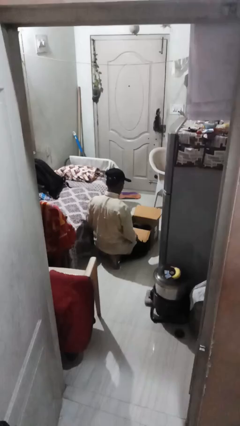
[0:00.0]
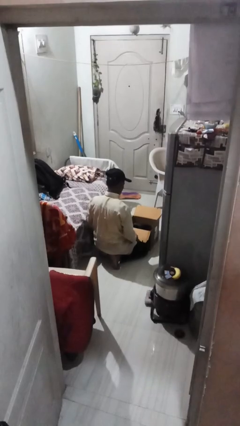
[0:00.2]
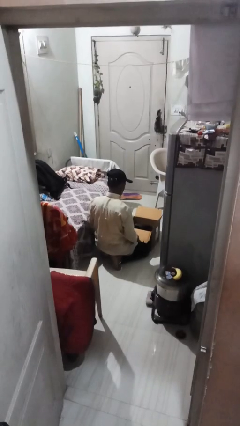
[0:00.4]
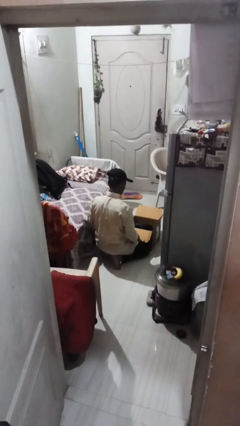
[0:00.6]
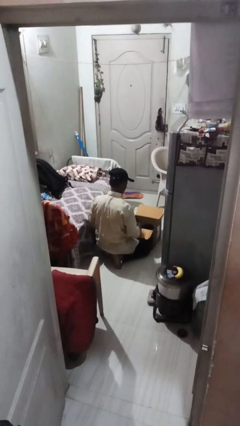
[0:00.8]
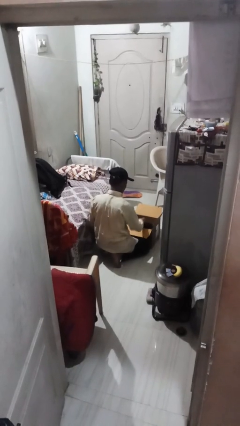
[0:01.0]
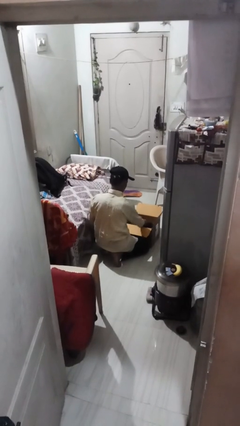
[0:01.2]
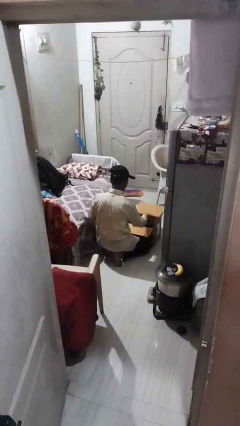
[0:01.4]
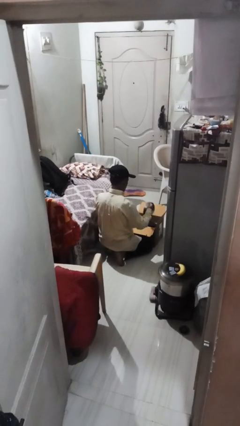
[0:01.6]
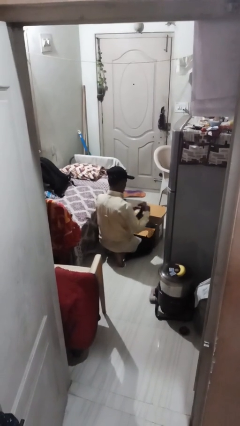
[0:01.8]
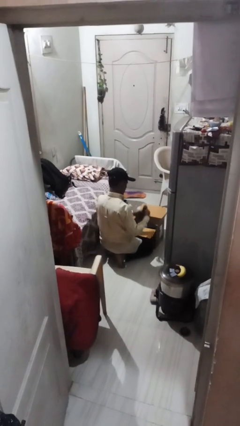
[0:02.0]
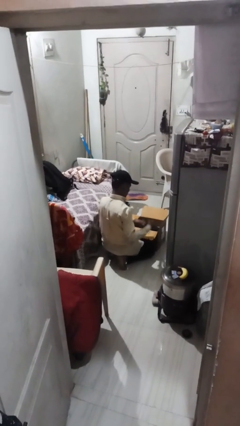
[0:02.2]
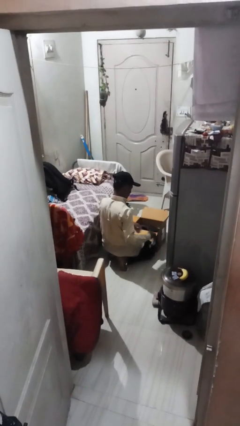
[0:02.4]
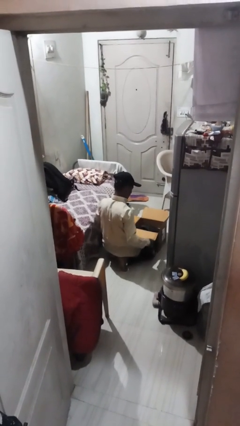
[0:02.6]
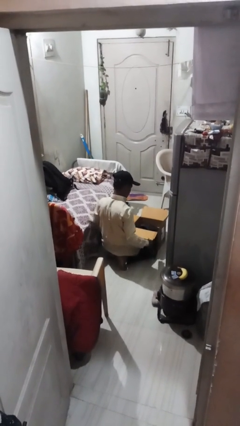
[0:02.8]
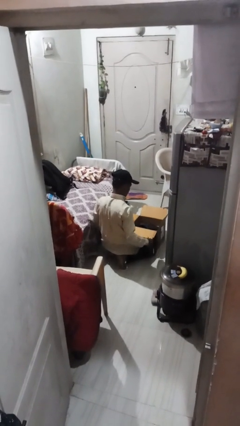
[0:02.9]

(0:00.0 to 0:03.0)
person takes object from box

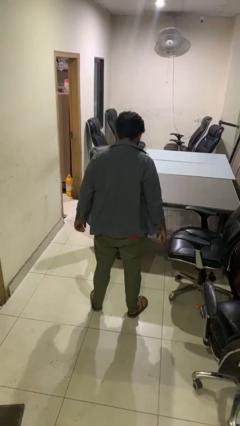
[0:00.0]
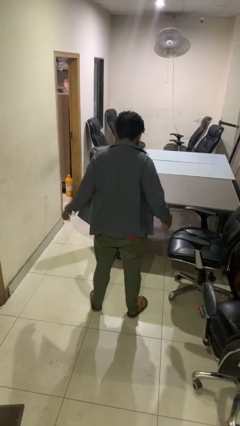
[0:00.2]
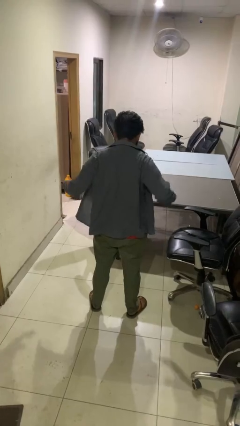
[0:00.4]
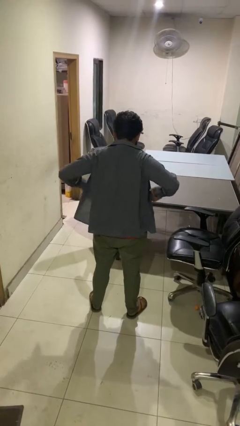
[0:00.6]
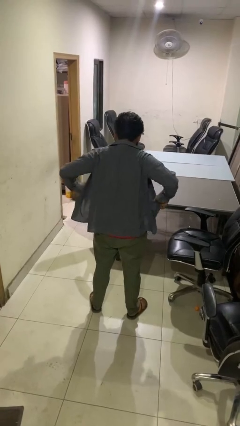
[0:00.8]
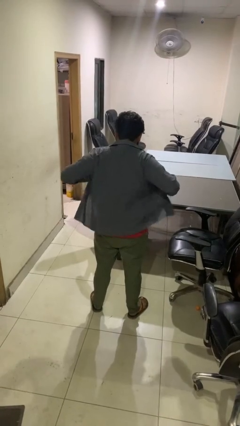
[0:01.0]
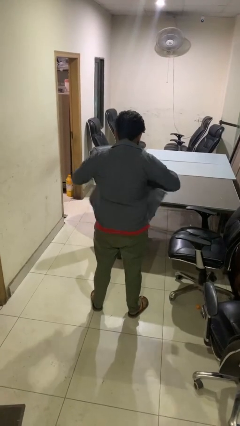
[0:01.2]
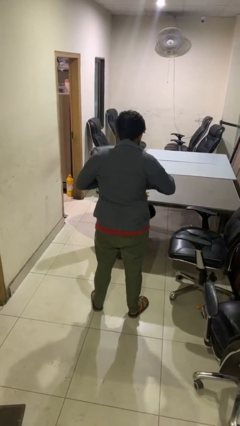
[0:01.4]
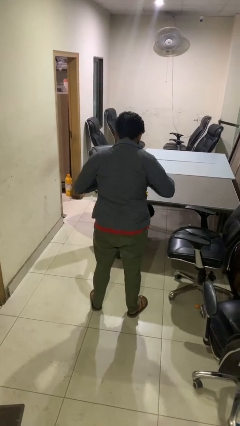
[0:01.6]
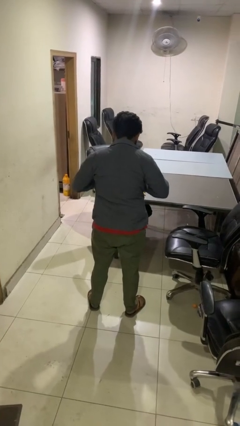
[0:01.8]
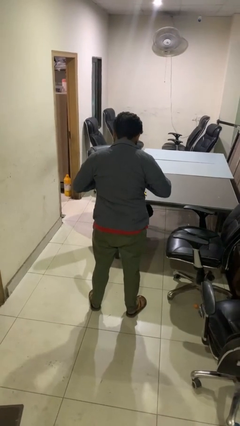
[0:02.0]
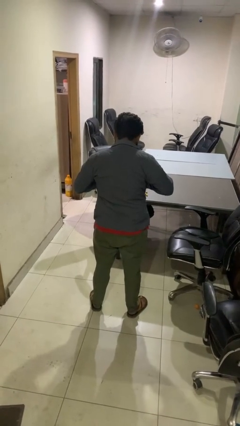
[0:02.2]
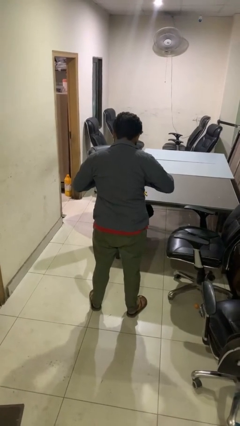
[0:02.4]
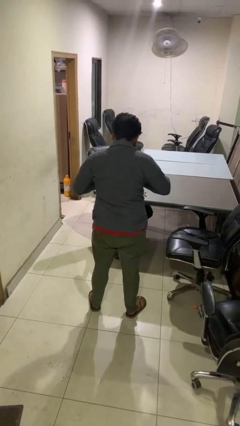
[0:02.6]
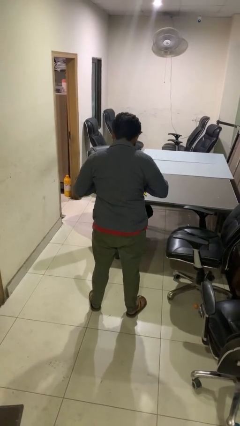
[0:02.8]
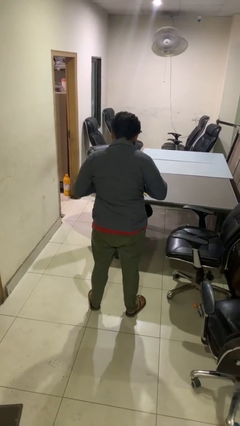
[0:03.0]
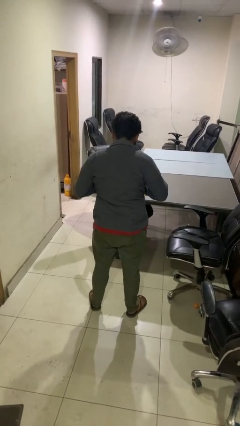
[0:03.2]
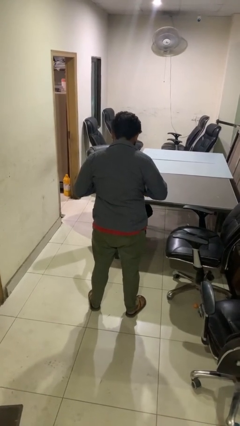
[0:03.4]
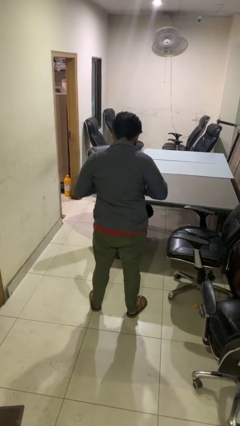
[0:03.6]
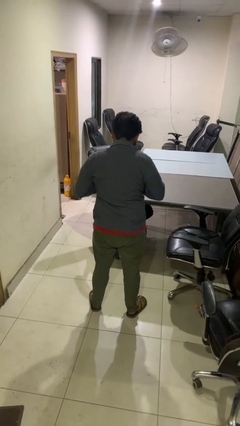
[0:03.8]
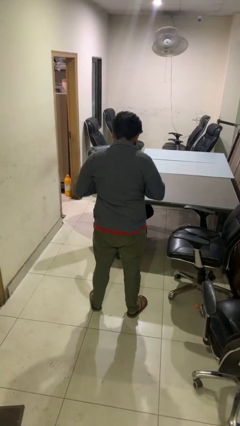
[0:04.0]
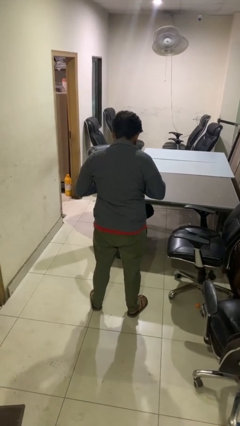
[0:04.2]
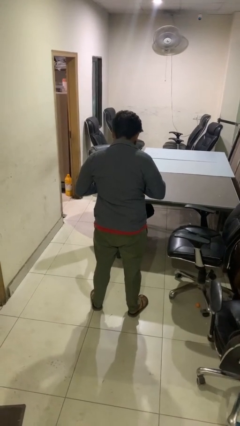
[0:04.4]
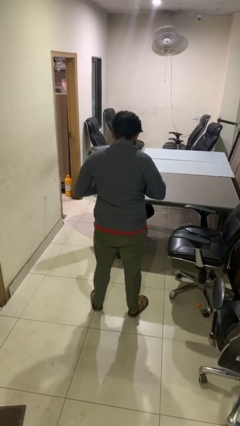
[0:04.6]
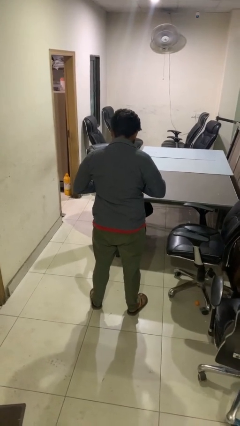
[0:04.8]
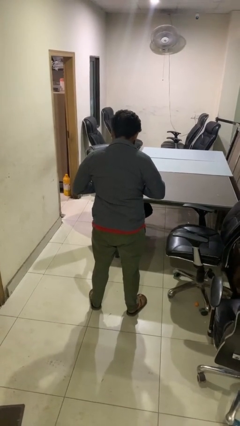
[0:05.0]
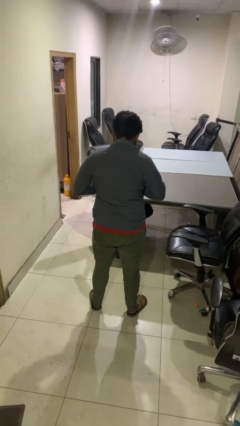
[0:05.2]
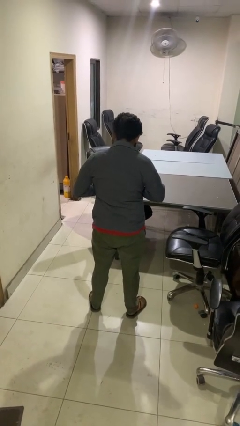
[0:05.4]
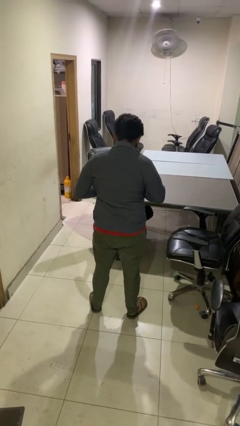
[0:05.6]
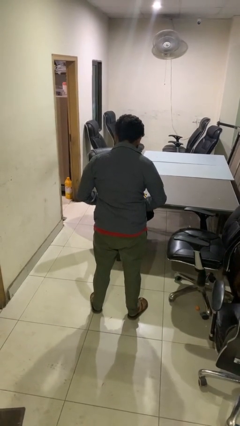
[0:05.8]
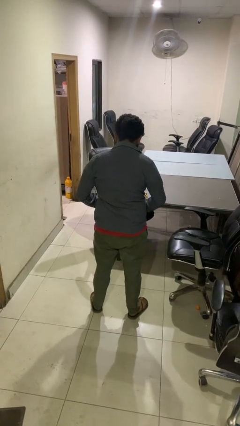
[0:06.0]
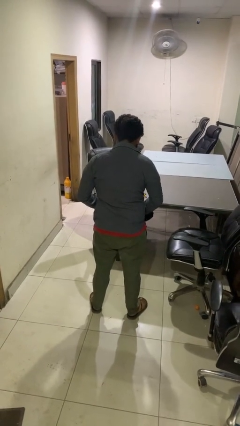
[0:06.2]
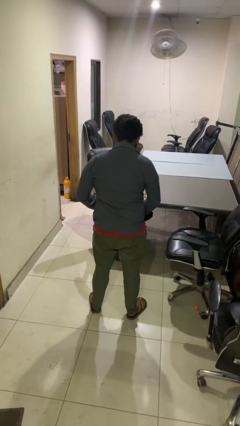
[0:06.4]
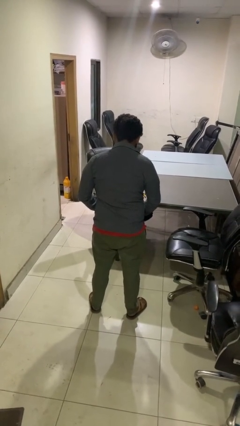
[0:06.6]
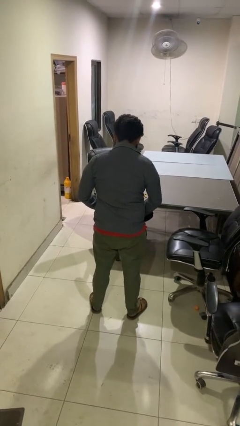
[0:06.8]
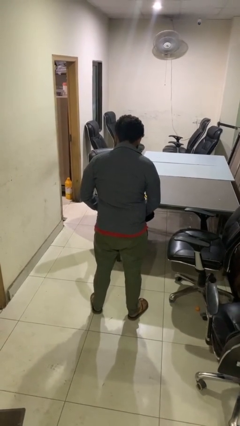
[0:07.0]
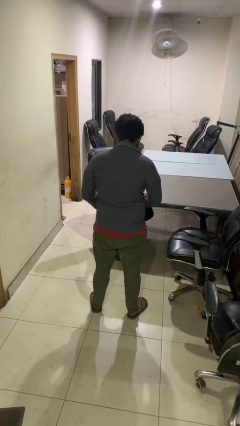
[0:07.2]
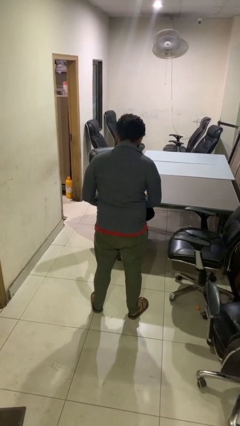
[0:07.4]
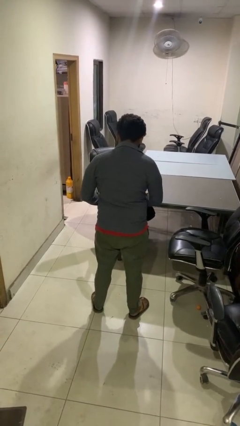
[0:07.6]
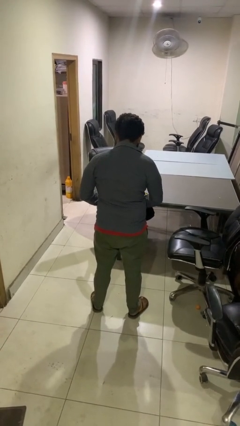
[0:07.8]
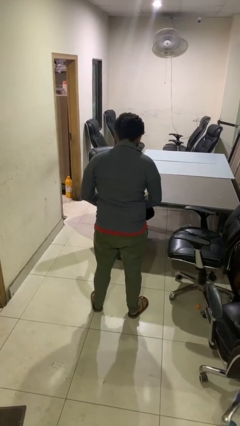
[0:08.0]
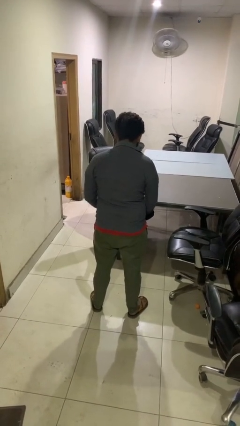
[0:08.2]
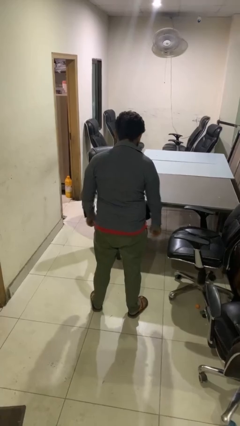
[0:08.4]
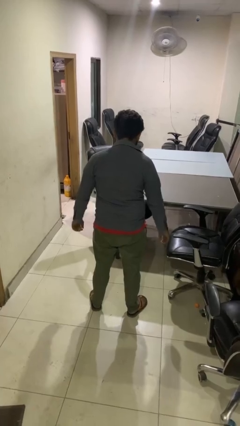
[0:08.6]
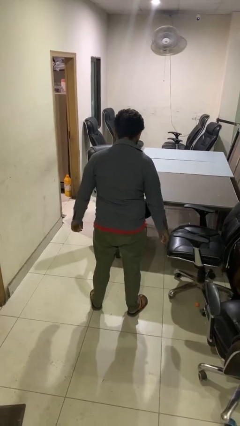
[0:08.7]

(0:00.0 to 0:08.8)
person buttons shirt

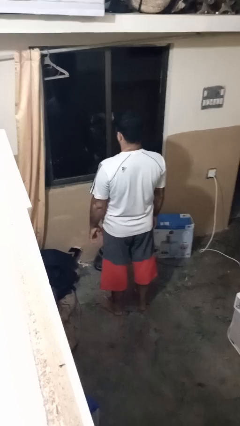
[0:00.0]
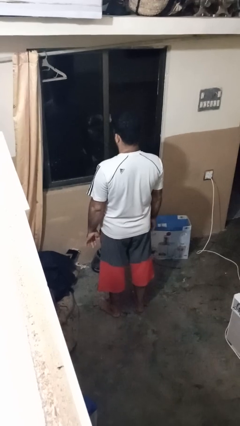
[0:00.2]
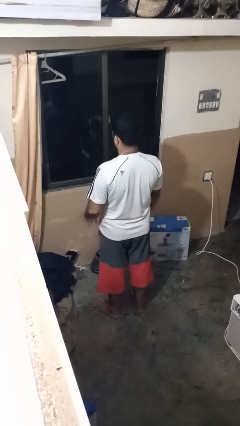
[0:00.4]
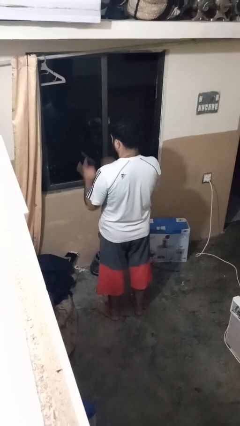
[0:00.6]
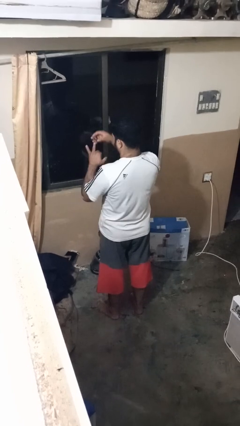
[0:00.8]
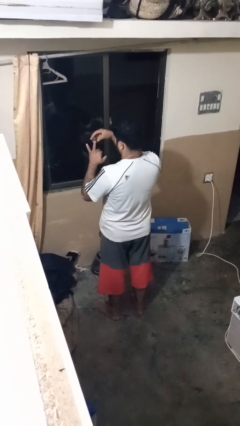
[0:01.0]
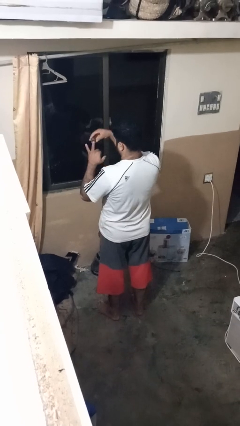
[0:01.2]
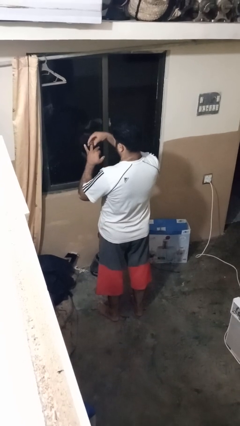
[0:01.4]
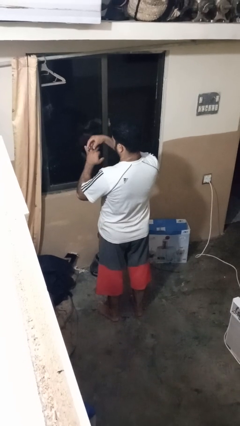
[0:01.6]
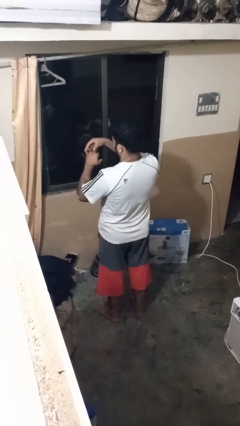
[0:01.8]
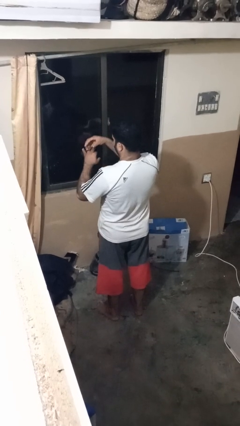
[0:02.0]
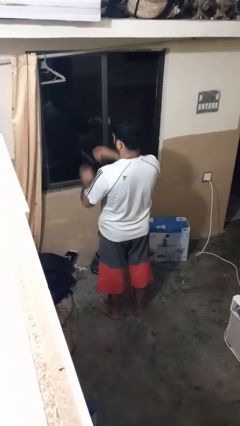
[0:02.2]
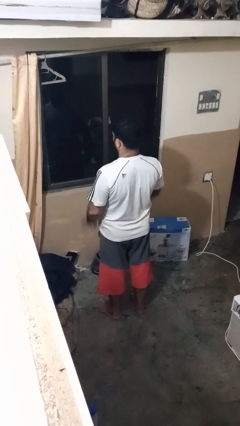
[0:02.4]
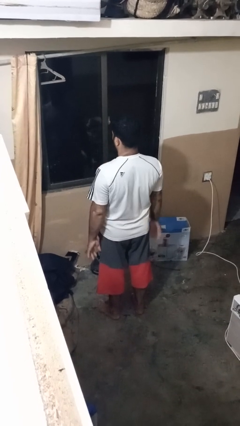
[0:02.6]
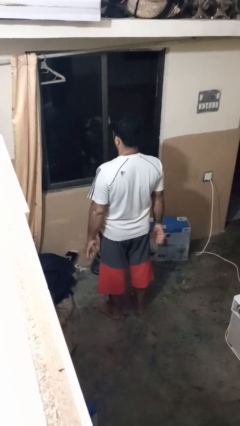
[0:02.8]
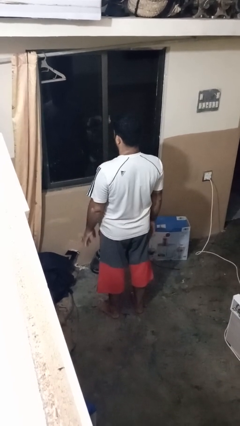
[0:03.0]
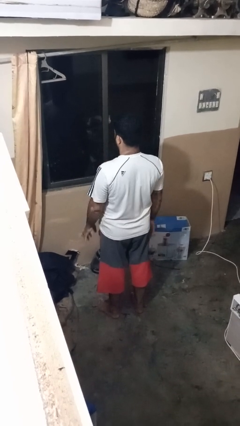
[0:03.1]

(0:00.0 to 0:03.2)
person puts on ring

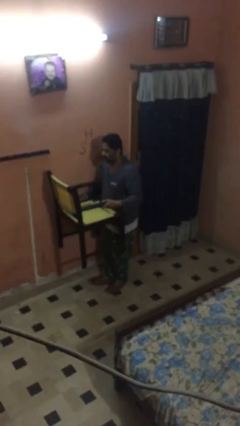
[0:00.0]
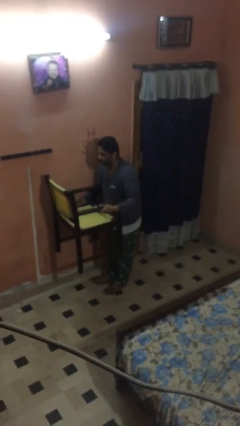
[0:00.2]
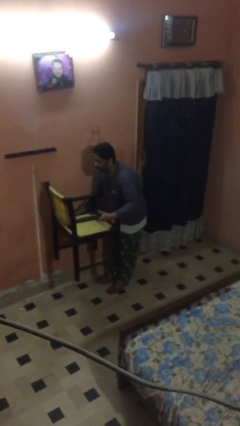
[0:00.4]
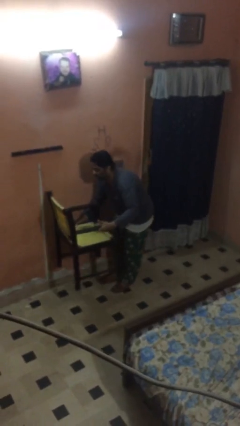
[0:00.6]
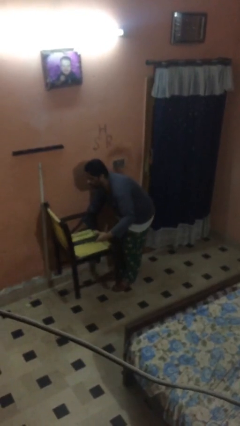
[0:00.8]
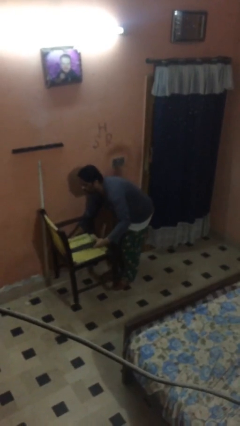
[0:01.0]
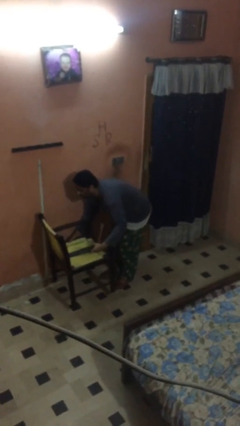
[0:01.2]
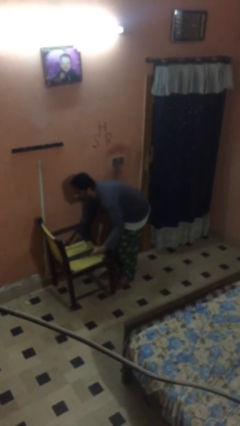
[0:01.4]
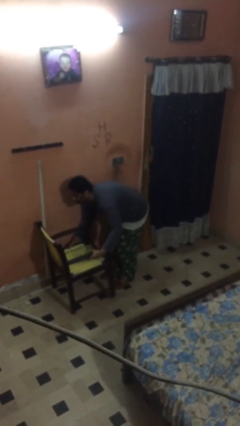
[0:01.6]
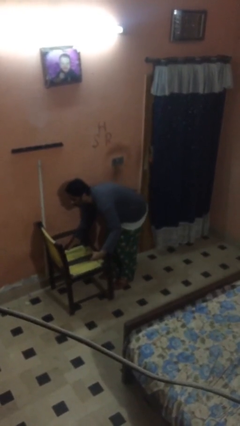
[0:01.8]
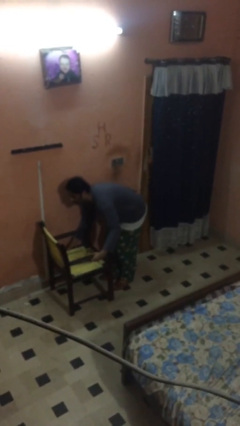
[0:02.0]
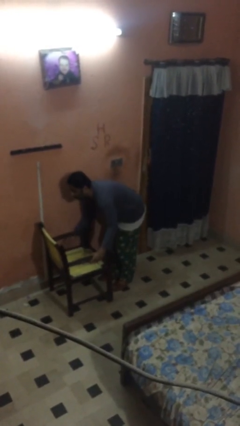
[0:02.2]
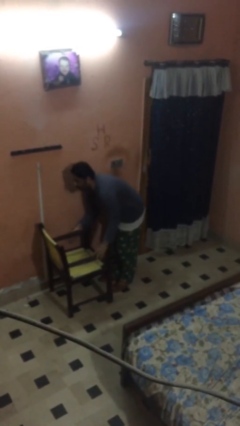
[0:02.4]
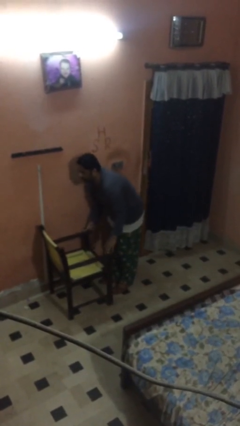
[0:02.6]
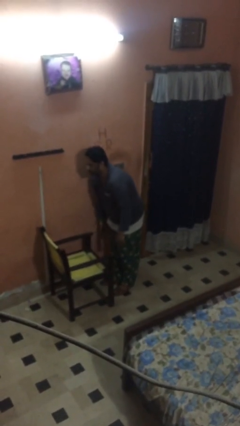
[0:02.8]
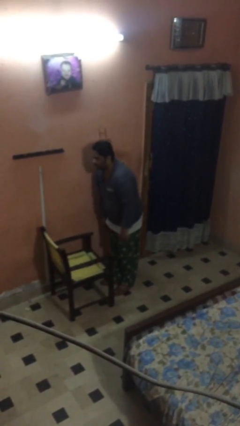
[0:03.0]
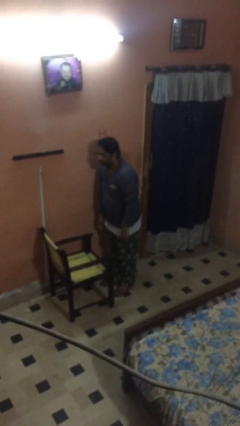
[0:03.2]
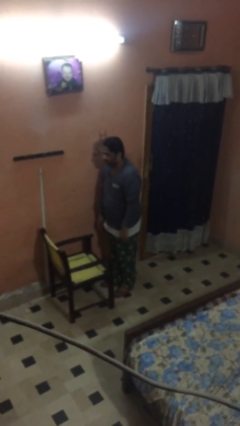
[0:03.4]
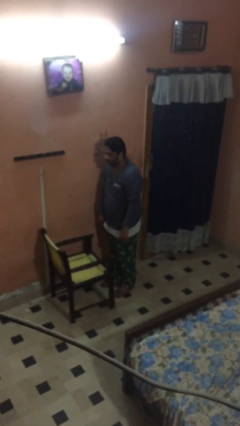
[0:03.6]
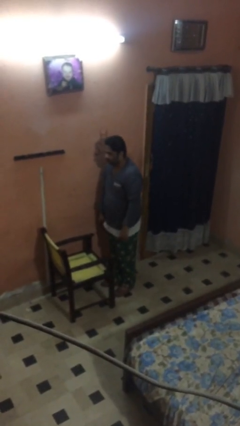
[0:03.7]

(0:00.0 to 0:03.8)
person puts down object on floor
